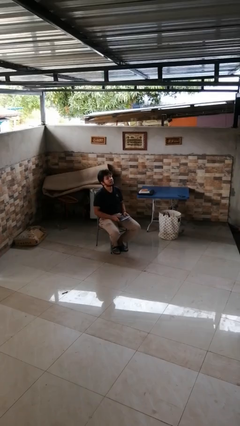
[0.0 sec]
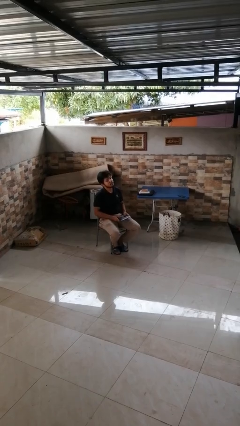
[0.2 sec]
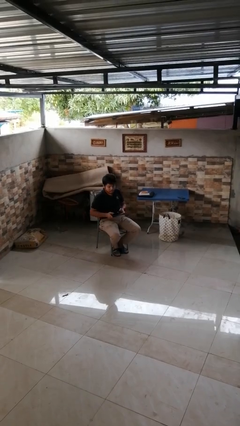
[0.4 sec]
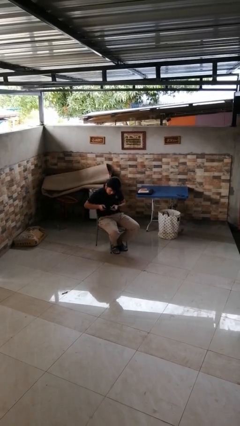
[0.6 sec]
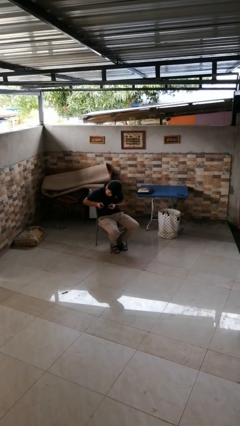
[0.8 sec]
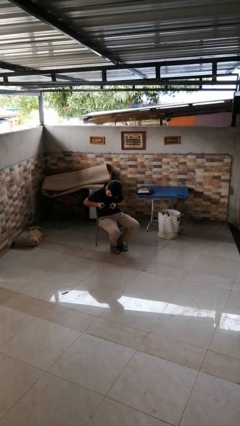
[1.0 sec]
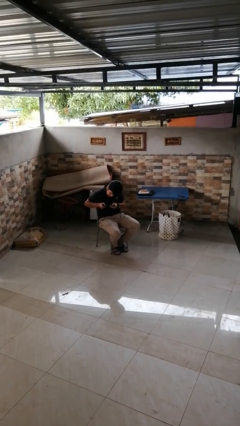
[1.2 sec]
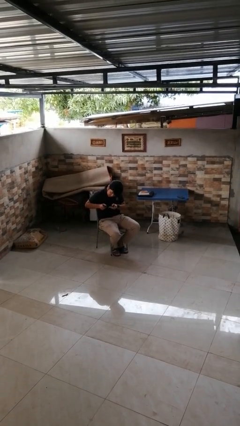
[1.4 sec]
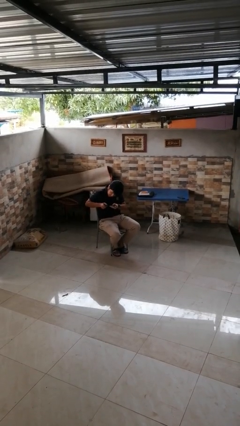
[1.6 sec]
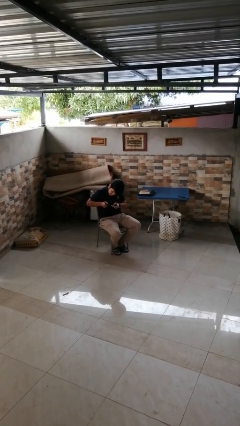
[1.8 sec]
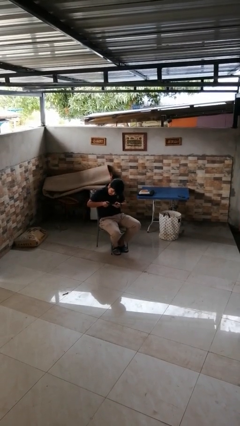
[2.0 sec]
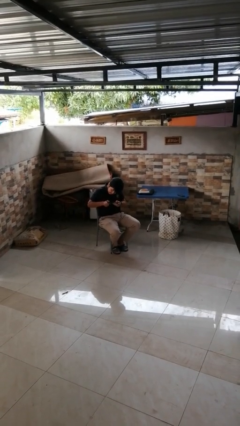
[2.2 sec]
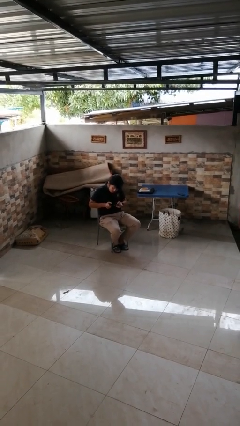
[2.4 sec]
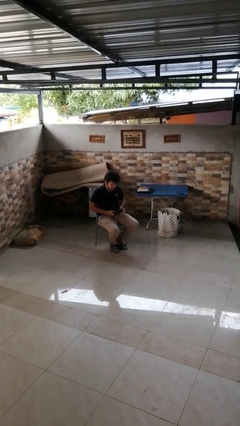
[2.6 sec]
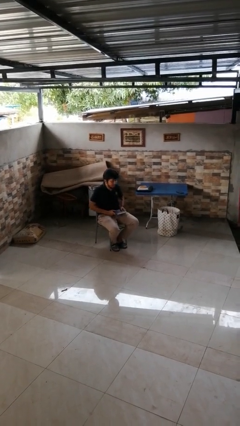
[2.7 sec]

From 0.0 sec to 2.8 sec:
person interacts with handheld game

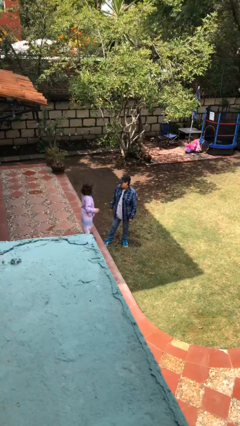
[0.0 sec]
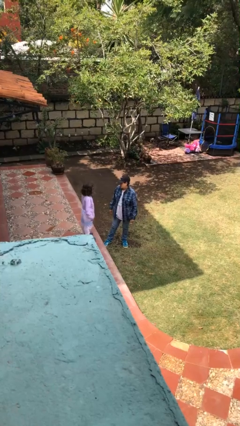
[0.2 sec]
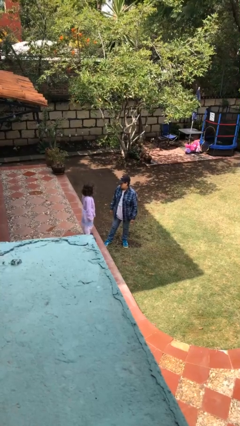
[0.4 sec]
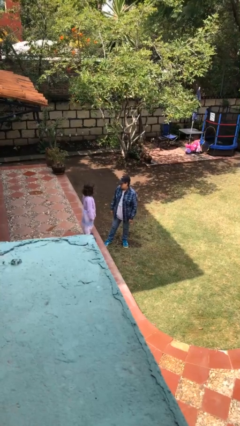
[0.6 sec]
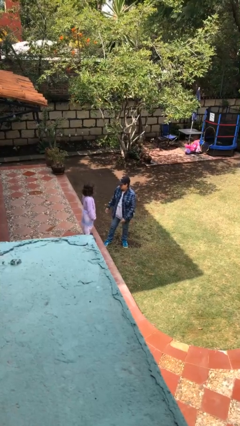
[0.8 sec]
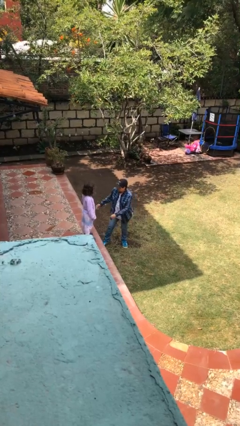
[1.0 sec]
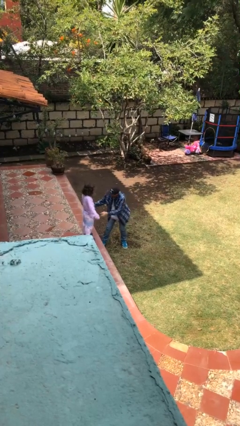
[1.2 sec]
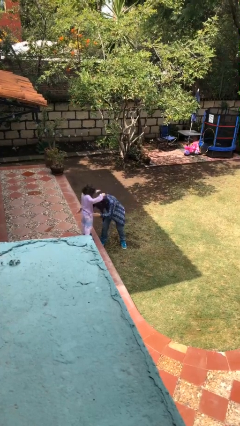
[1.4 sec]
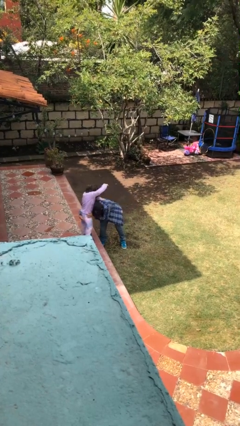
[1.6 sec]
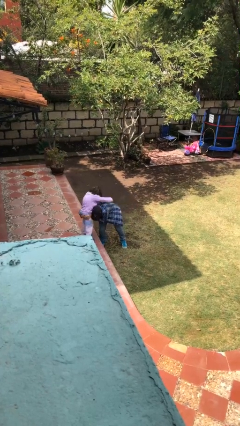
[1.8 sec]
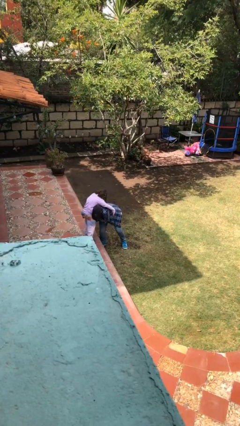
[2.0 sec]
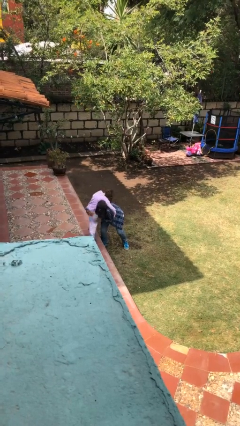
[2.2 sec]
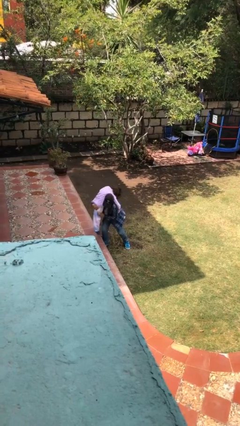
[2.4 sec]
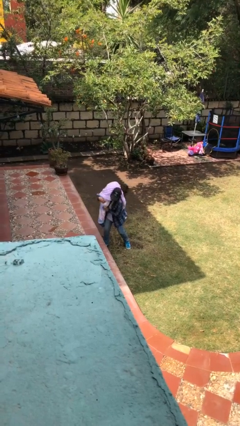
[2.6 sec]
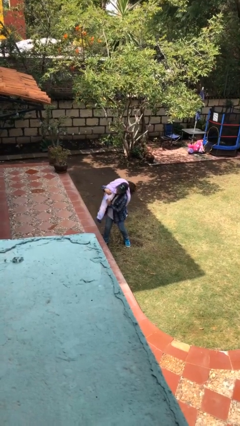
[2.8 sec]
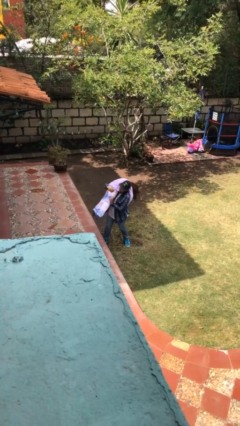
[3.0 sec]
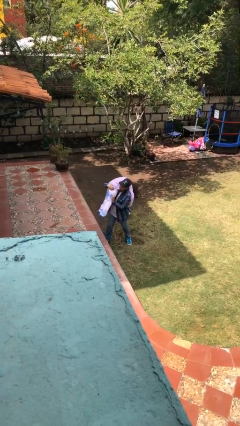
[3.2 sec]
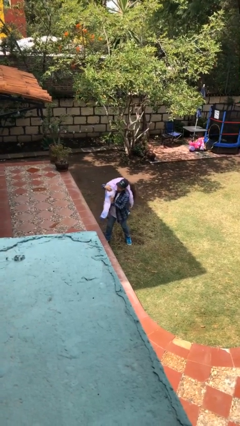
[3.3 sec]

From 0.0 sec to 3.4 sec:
person carries person over shoulder

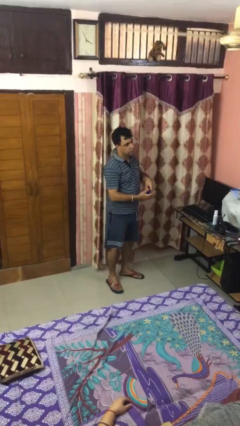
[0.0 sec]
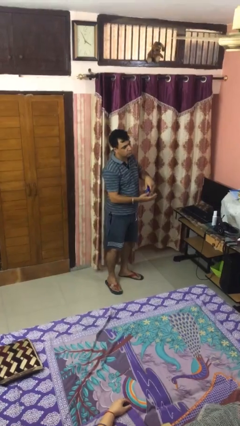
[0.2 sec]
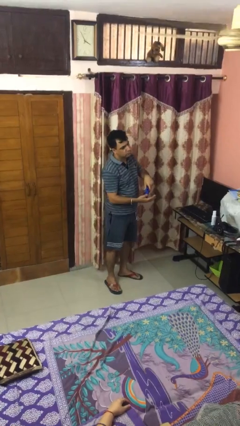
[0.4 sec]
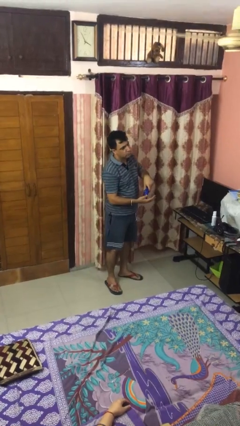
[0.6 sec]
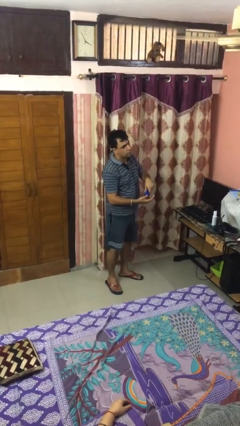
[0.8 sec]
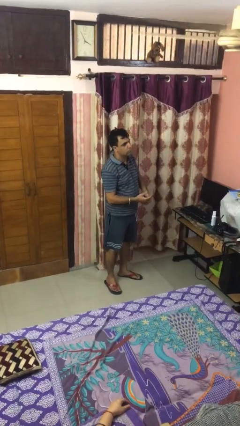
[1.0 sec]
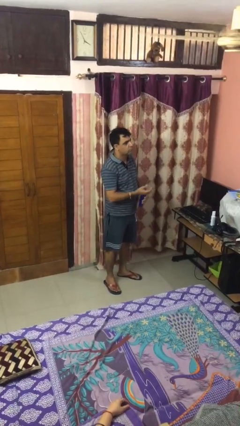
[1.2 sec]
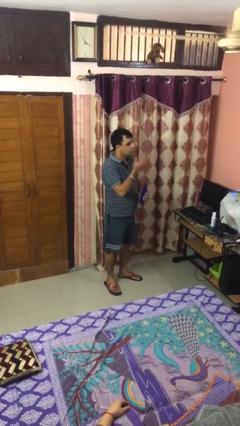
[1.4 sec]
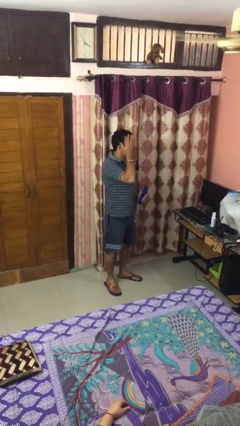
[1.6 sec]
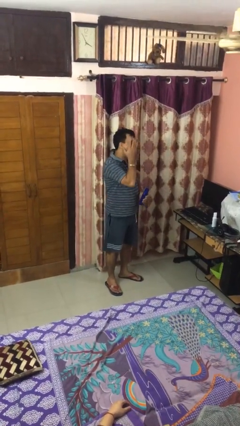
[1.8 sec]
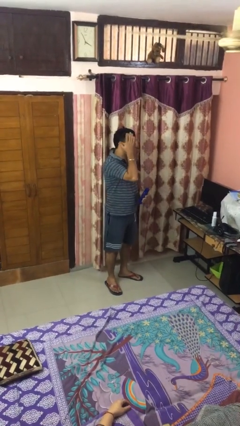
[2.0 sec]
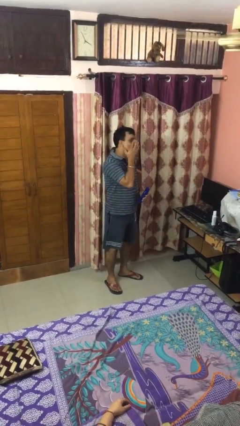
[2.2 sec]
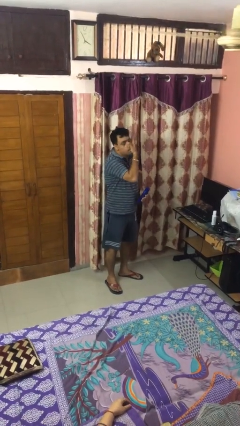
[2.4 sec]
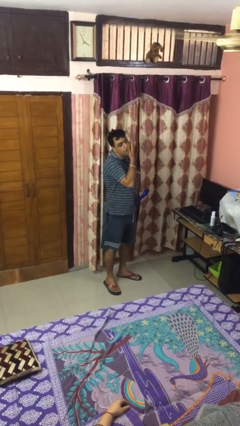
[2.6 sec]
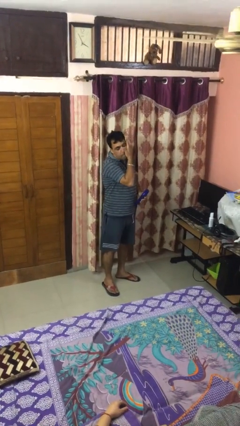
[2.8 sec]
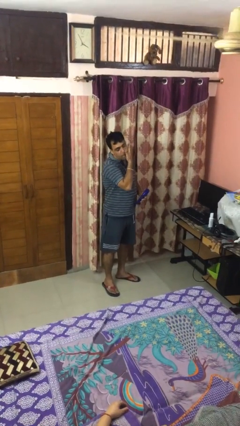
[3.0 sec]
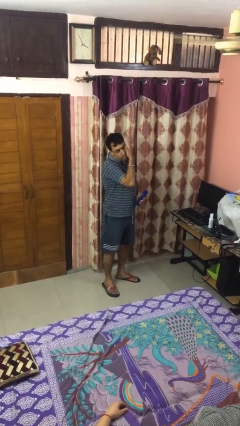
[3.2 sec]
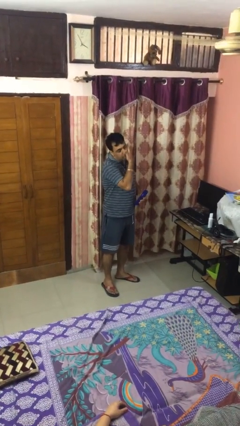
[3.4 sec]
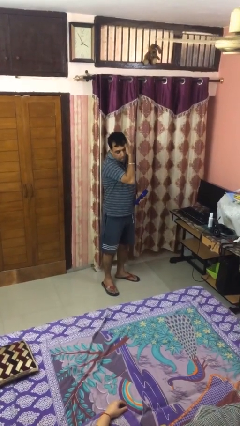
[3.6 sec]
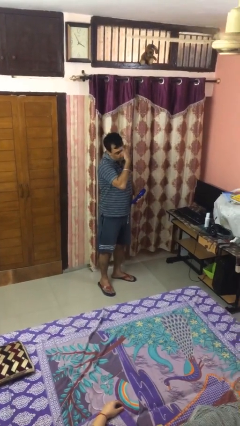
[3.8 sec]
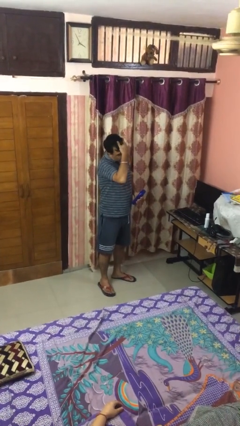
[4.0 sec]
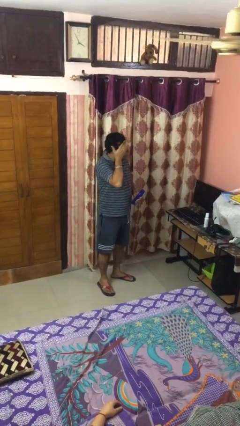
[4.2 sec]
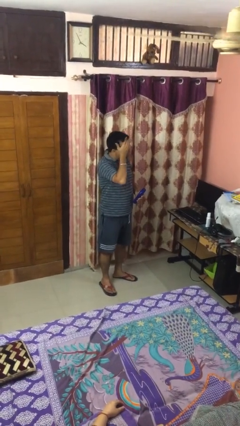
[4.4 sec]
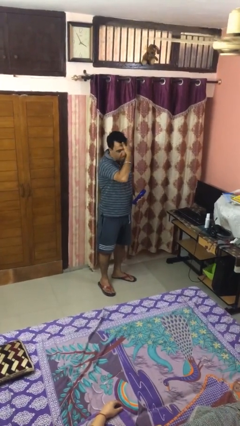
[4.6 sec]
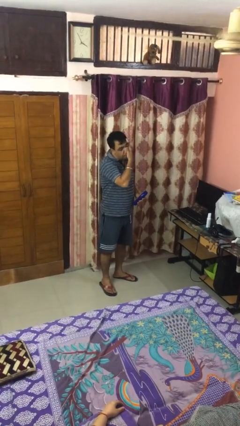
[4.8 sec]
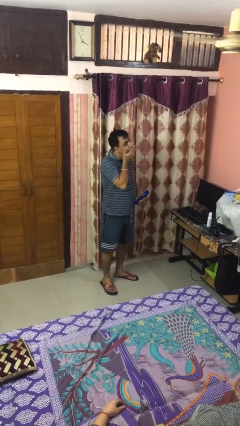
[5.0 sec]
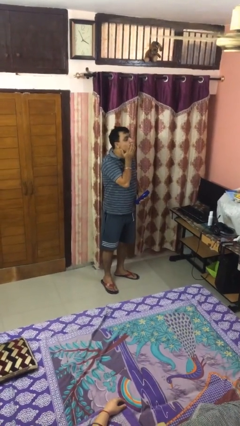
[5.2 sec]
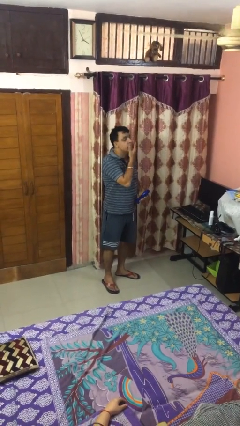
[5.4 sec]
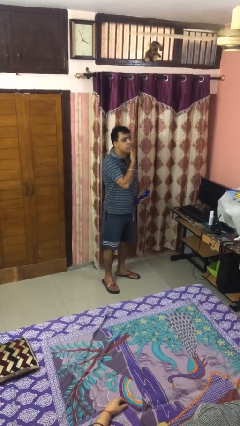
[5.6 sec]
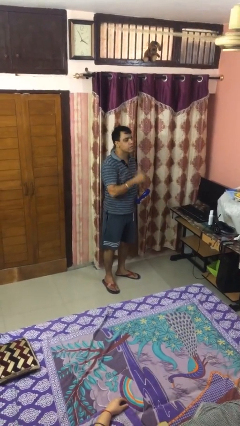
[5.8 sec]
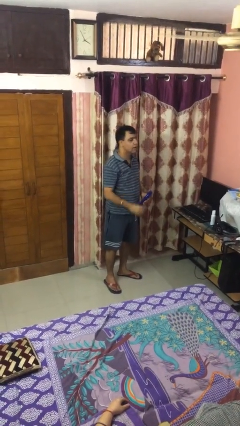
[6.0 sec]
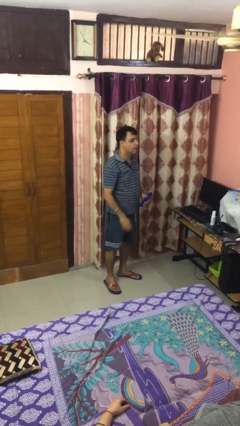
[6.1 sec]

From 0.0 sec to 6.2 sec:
person applies facial moisturizer

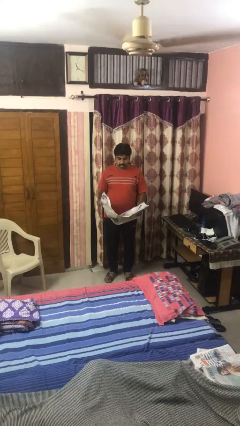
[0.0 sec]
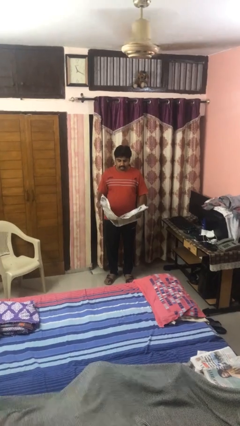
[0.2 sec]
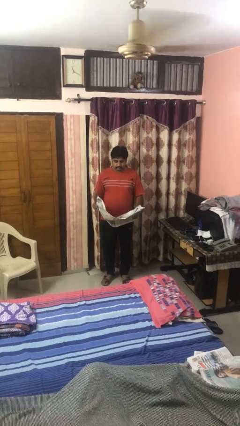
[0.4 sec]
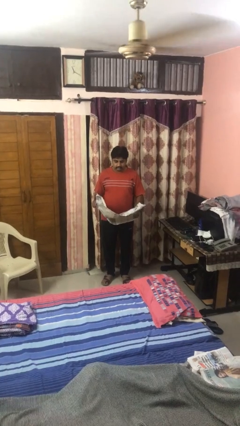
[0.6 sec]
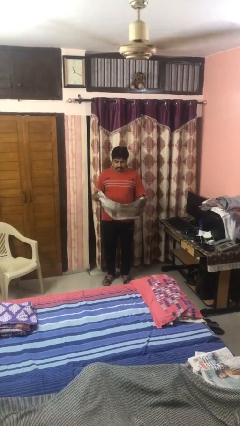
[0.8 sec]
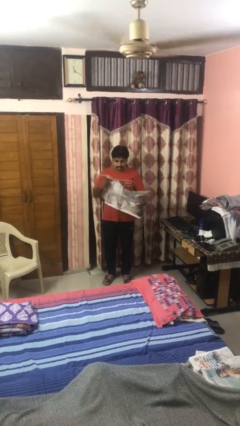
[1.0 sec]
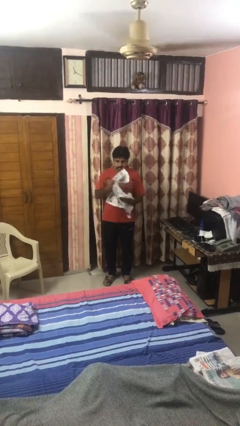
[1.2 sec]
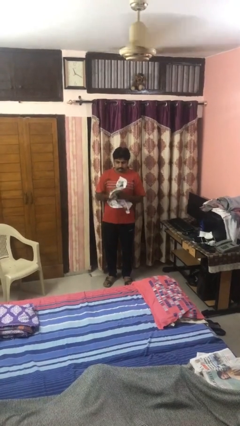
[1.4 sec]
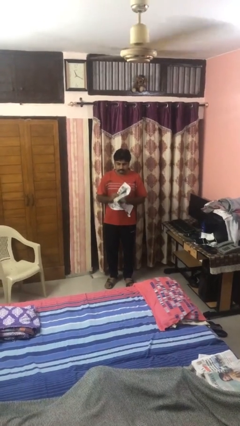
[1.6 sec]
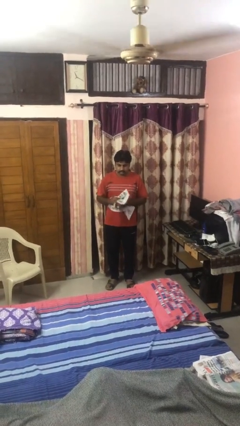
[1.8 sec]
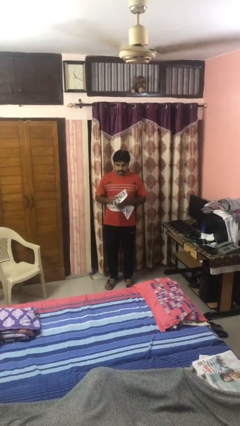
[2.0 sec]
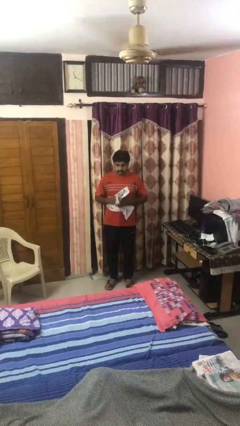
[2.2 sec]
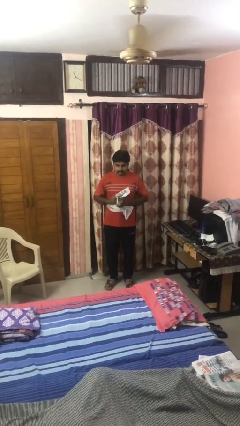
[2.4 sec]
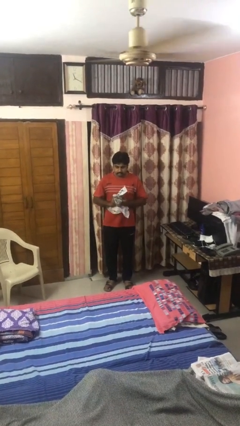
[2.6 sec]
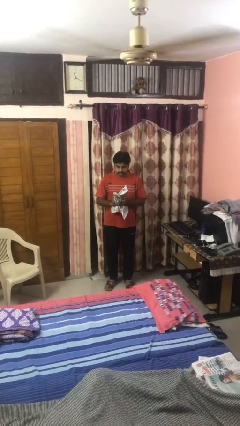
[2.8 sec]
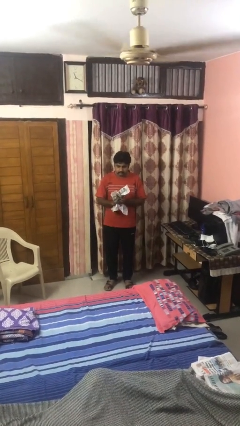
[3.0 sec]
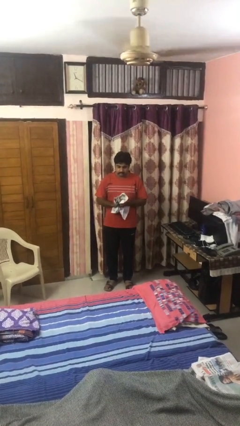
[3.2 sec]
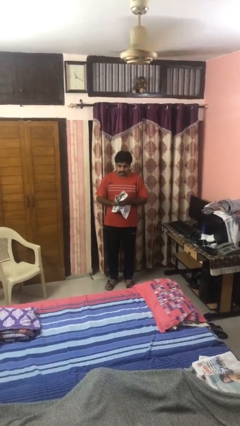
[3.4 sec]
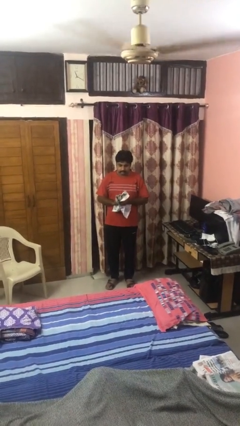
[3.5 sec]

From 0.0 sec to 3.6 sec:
person crumples paper

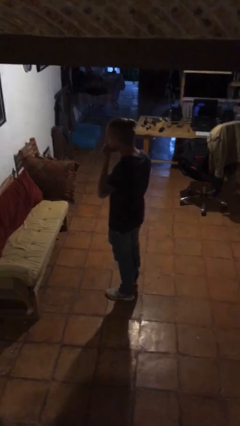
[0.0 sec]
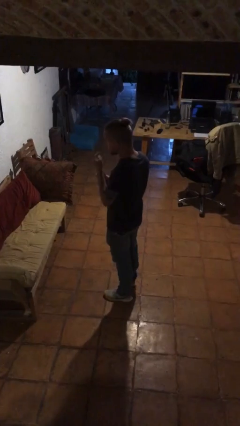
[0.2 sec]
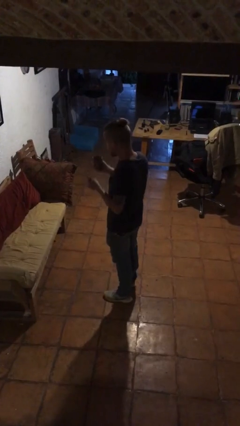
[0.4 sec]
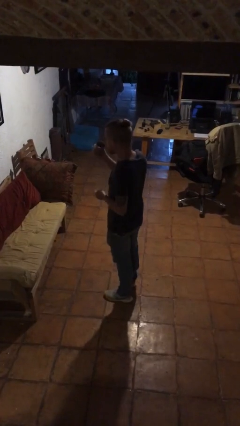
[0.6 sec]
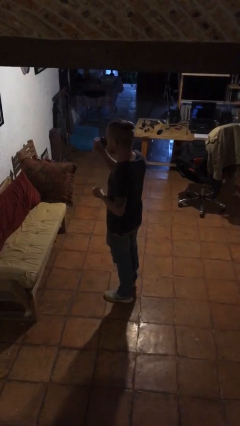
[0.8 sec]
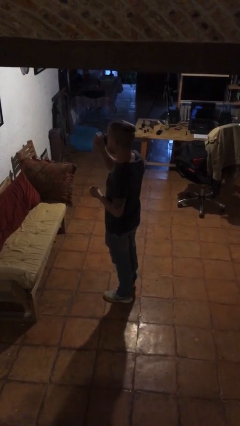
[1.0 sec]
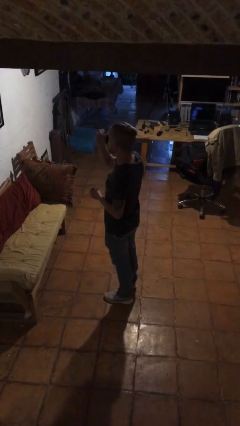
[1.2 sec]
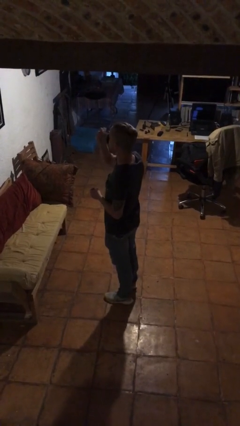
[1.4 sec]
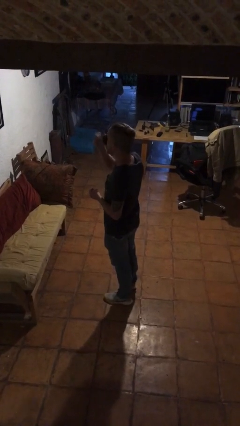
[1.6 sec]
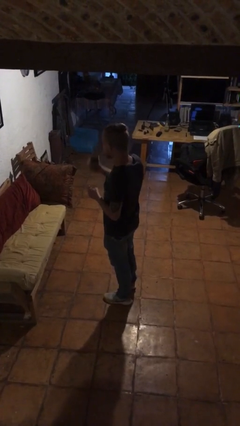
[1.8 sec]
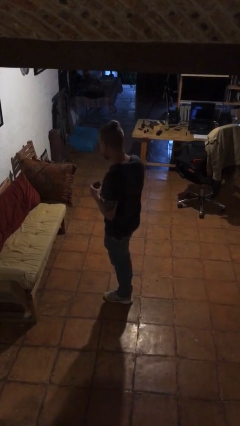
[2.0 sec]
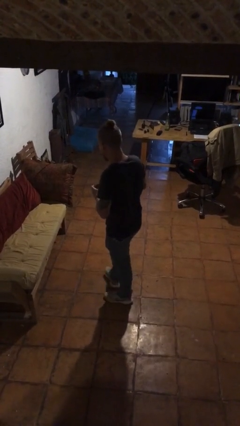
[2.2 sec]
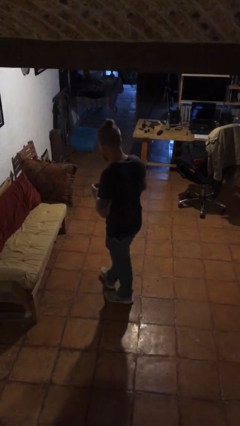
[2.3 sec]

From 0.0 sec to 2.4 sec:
person drinks from cup
